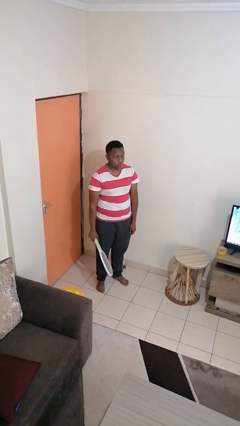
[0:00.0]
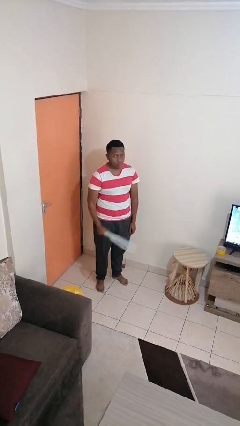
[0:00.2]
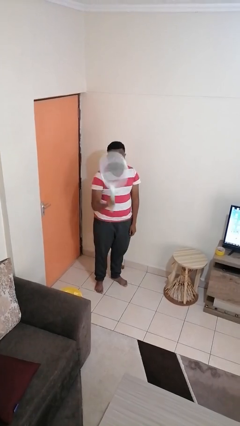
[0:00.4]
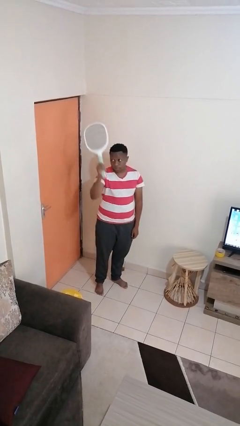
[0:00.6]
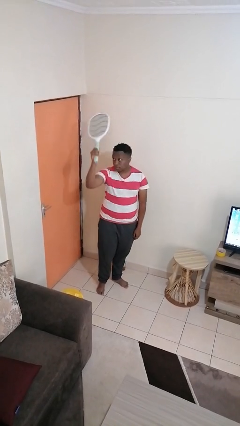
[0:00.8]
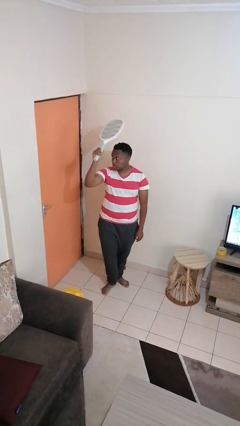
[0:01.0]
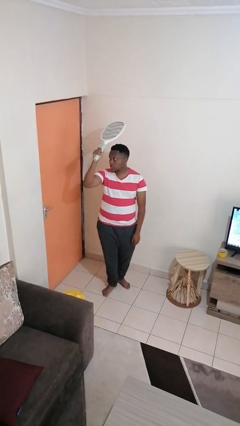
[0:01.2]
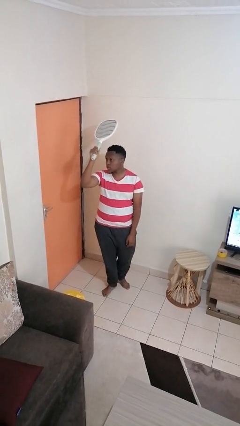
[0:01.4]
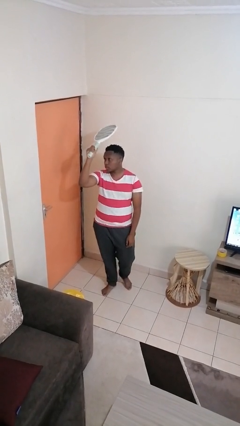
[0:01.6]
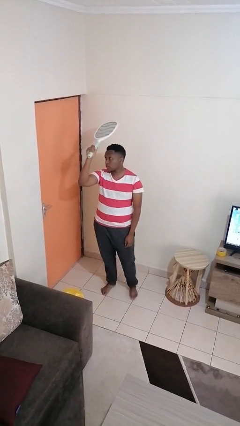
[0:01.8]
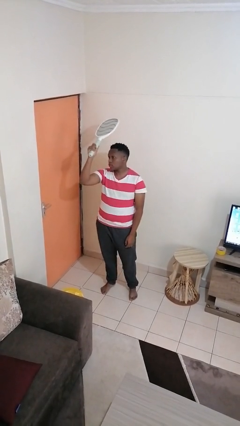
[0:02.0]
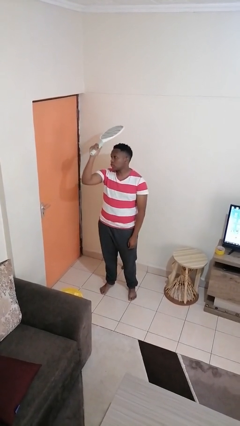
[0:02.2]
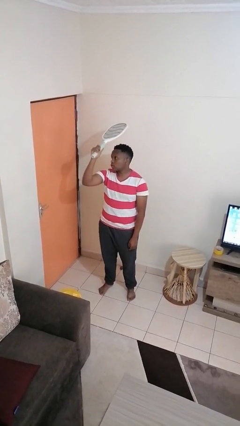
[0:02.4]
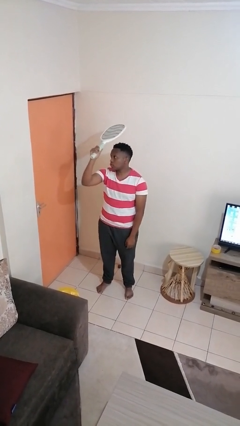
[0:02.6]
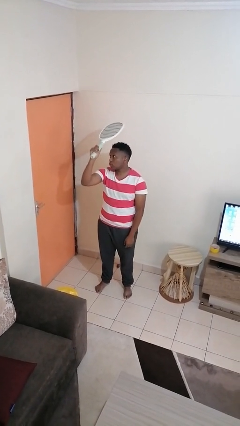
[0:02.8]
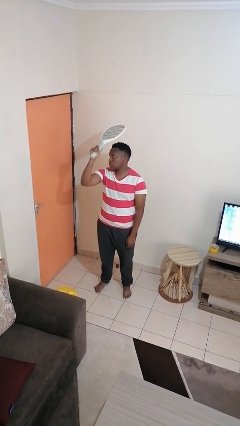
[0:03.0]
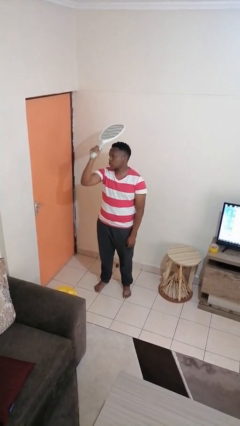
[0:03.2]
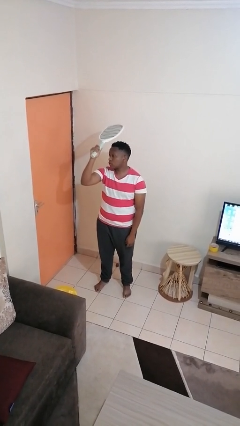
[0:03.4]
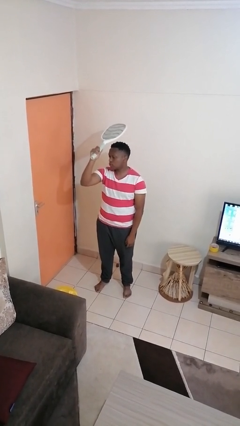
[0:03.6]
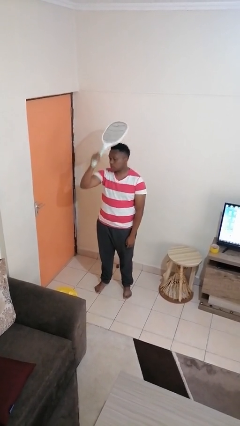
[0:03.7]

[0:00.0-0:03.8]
person holds object above head

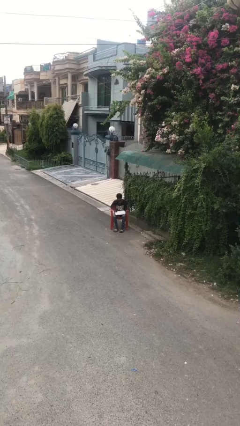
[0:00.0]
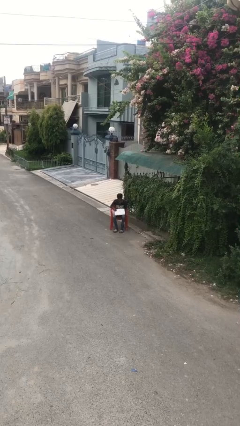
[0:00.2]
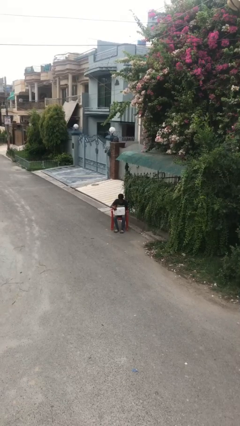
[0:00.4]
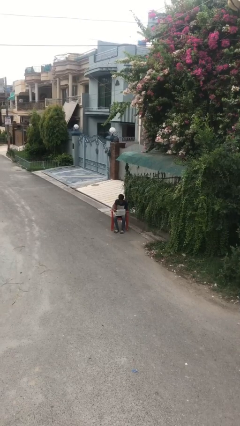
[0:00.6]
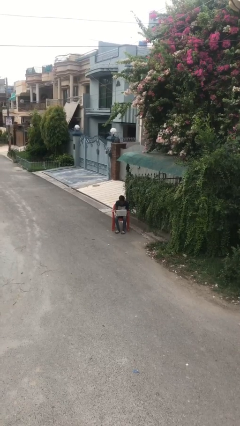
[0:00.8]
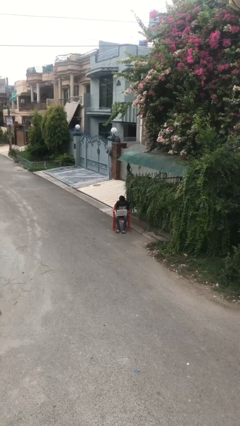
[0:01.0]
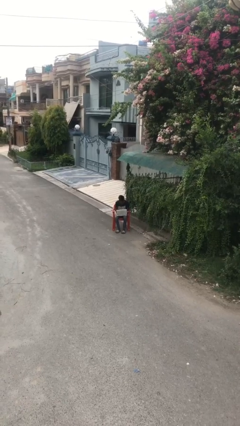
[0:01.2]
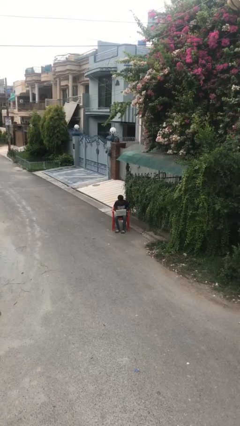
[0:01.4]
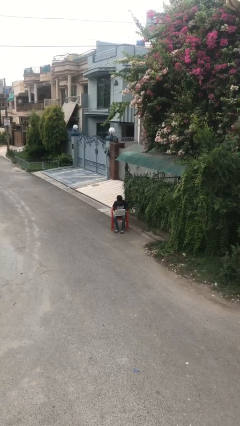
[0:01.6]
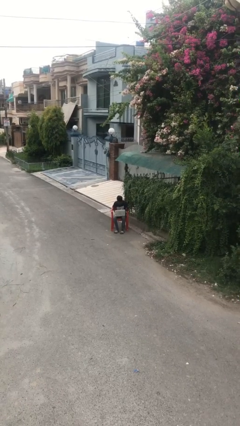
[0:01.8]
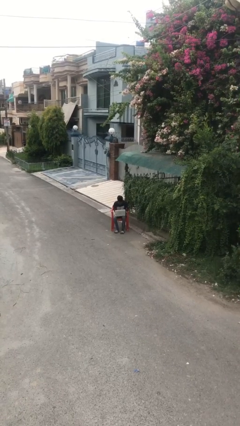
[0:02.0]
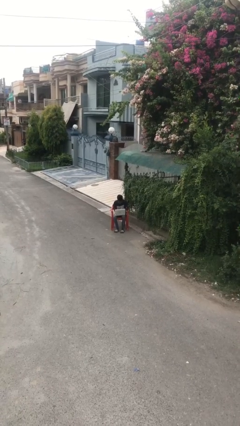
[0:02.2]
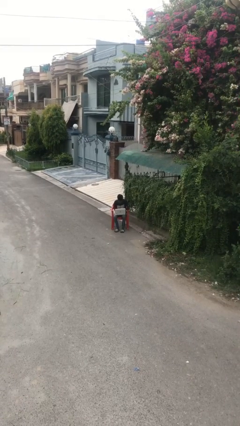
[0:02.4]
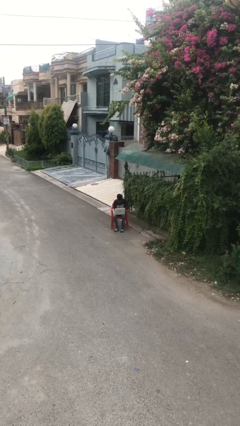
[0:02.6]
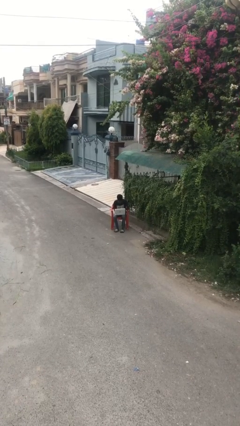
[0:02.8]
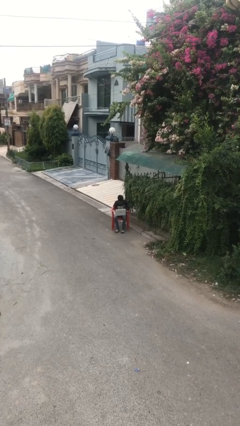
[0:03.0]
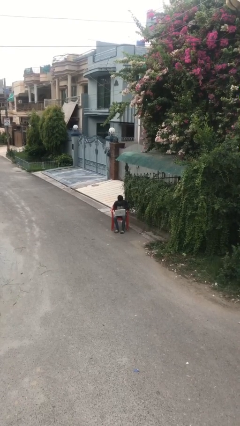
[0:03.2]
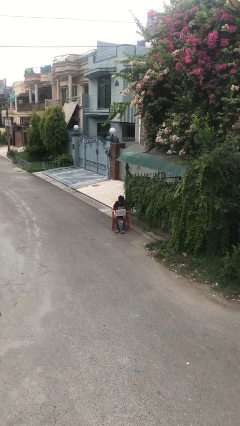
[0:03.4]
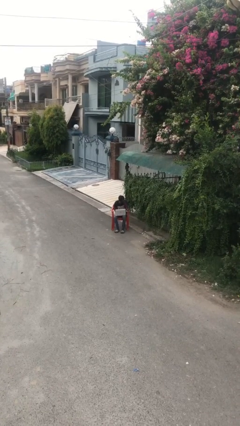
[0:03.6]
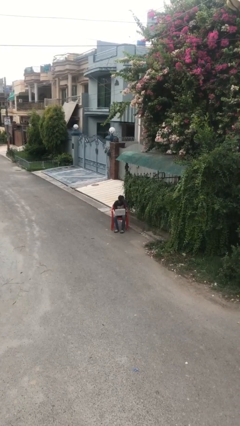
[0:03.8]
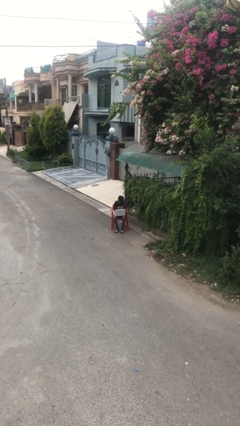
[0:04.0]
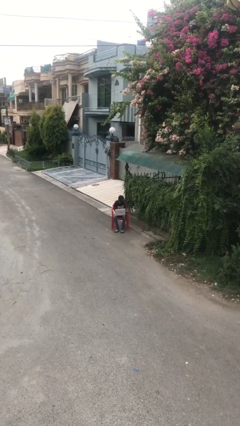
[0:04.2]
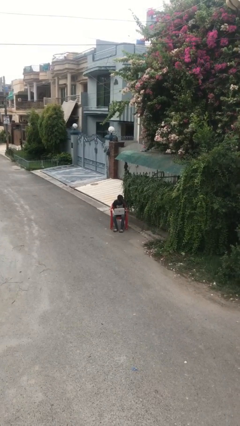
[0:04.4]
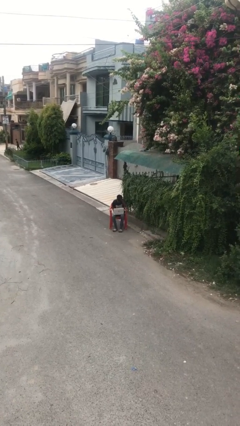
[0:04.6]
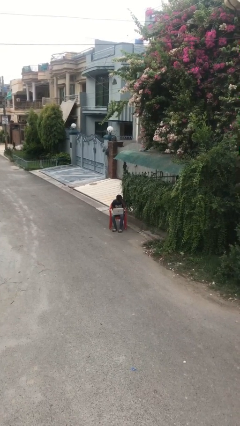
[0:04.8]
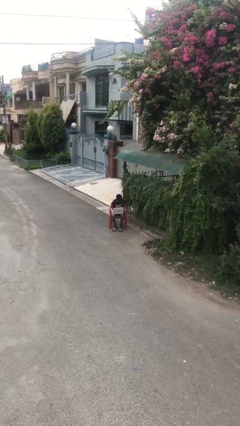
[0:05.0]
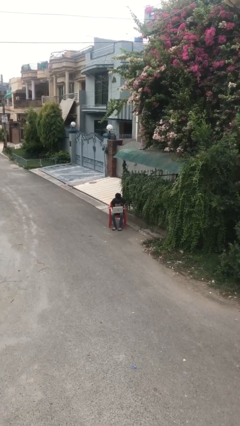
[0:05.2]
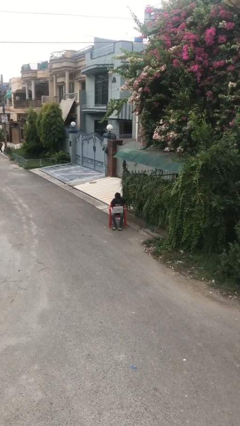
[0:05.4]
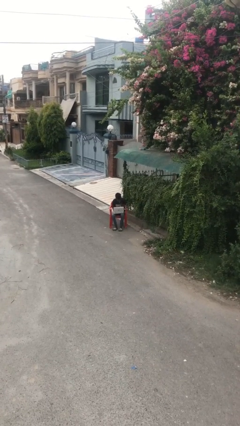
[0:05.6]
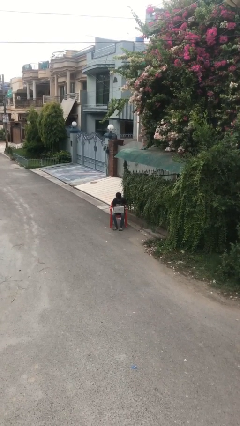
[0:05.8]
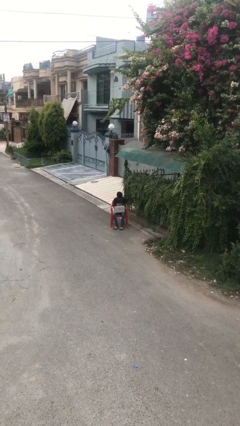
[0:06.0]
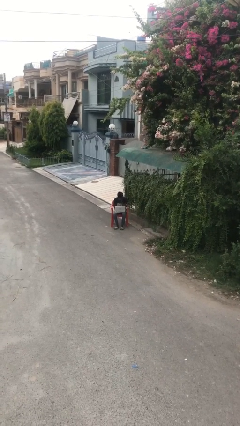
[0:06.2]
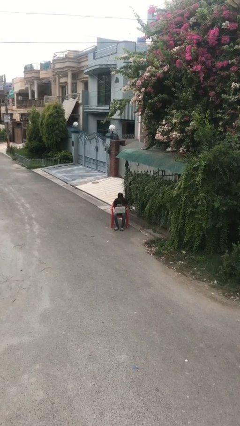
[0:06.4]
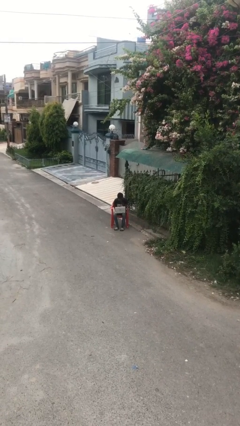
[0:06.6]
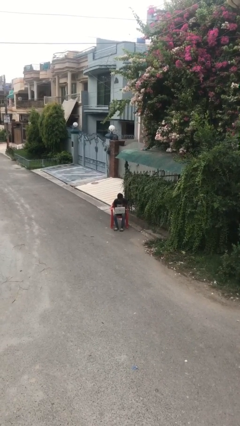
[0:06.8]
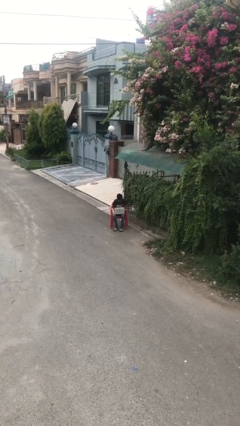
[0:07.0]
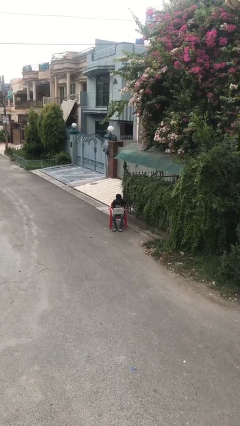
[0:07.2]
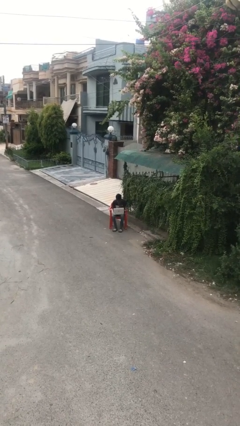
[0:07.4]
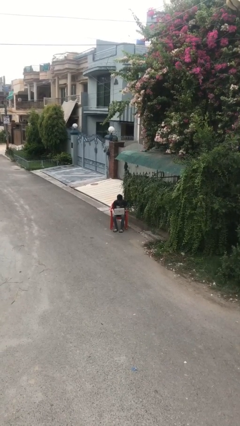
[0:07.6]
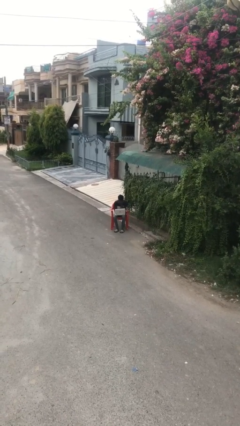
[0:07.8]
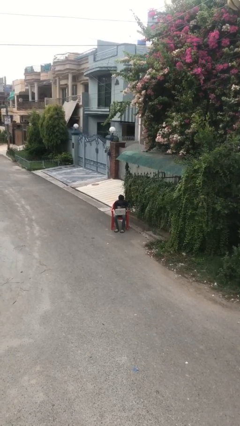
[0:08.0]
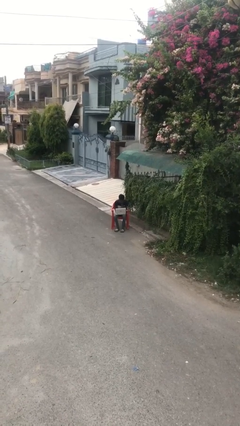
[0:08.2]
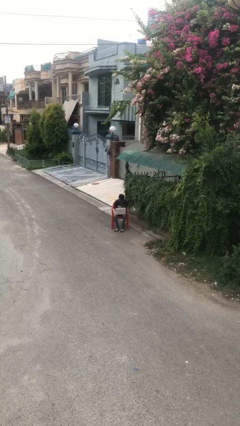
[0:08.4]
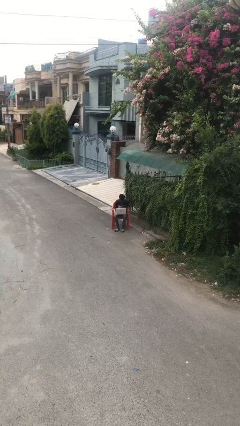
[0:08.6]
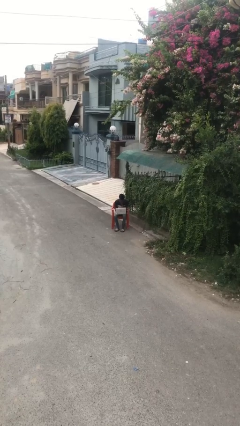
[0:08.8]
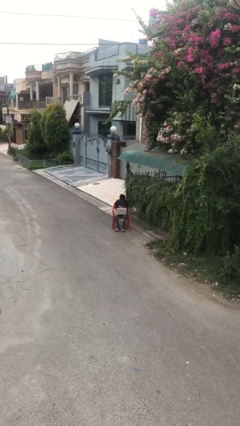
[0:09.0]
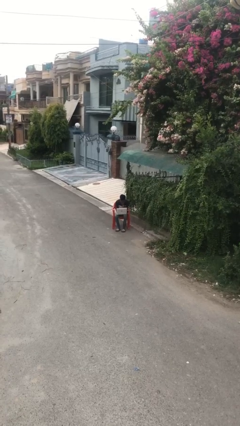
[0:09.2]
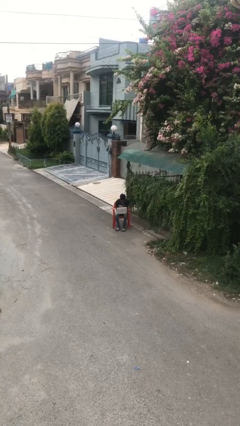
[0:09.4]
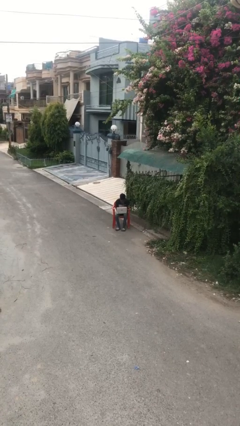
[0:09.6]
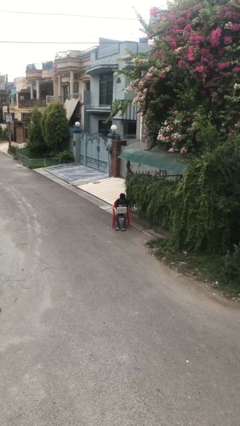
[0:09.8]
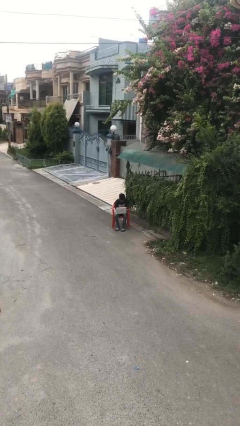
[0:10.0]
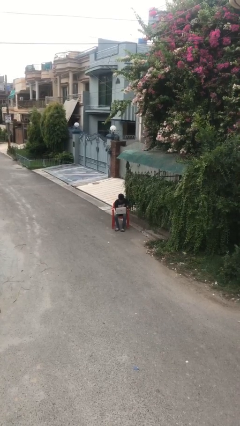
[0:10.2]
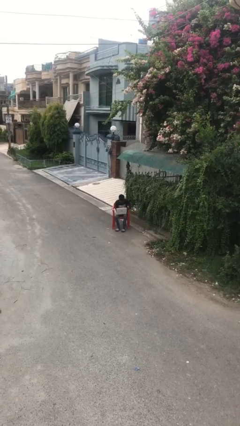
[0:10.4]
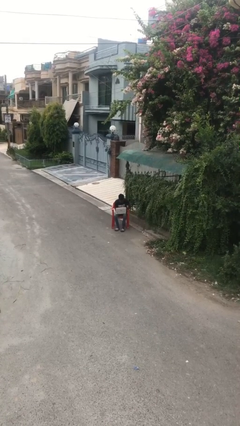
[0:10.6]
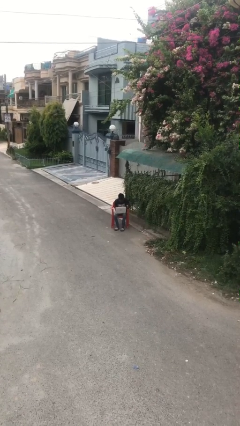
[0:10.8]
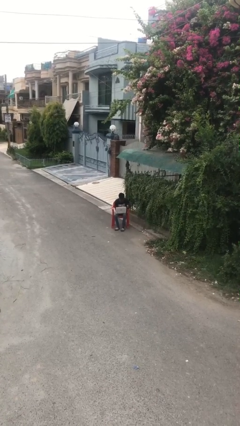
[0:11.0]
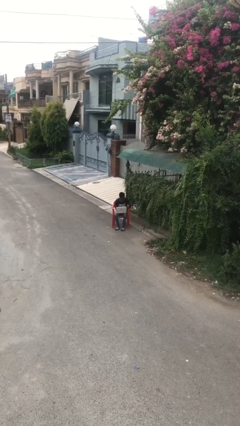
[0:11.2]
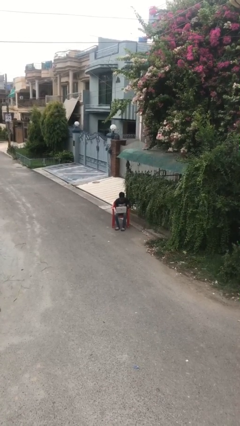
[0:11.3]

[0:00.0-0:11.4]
person interacts with laptop

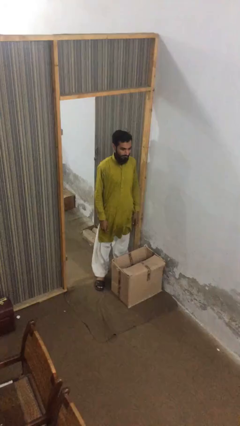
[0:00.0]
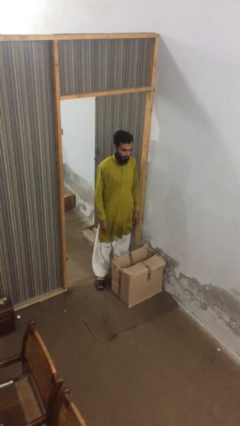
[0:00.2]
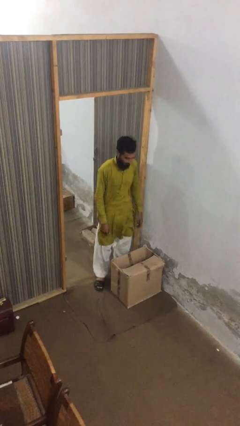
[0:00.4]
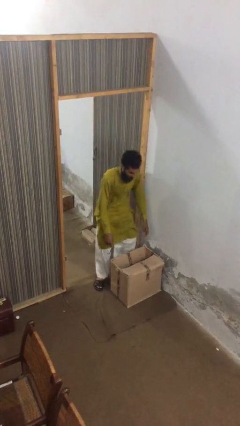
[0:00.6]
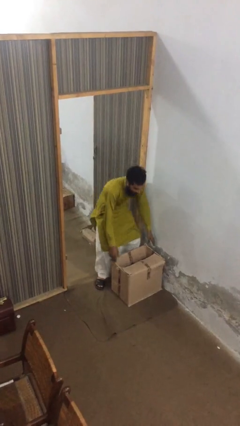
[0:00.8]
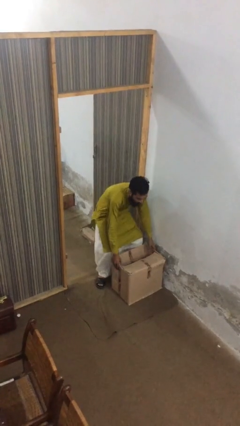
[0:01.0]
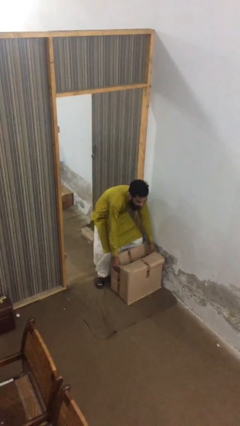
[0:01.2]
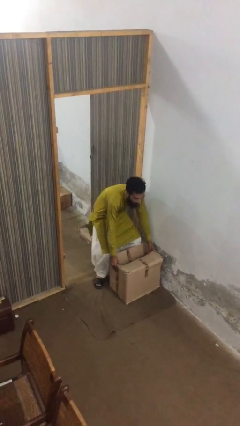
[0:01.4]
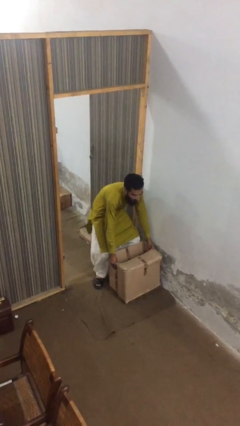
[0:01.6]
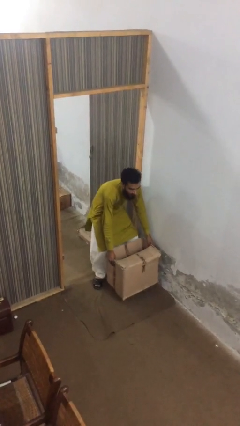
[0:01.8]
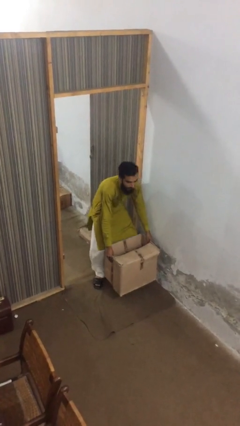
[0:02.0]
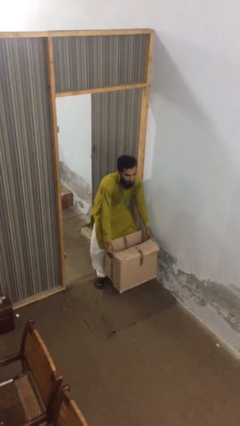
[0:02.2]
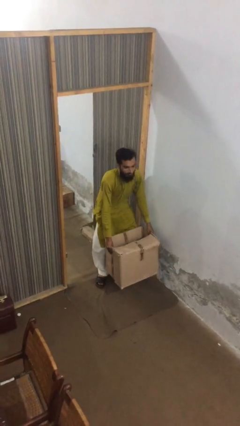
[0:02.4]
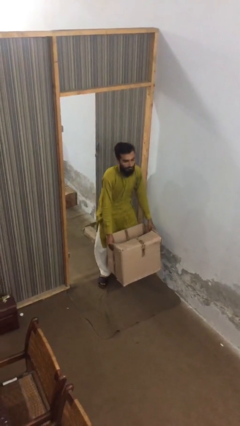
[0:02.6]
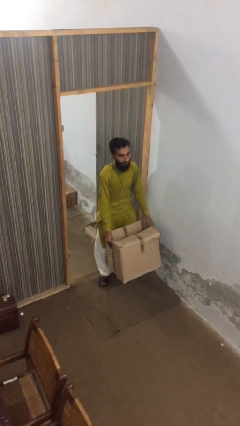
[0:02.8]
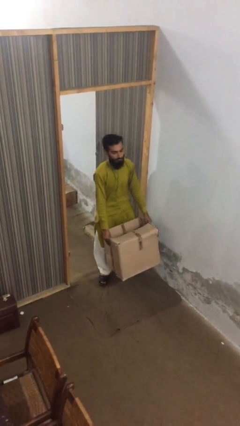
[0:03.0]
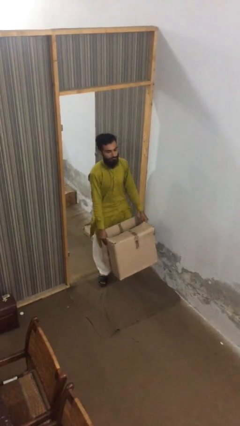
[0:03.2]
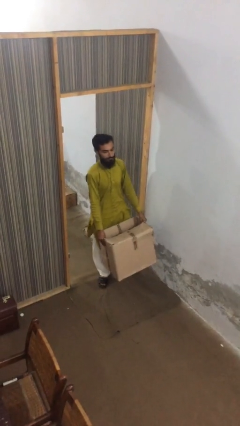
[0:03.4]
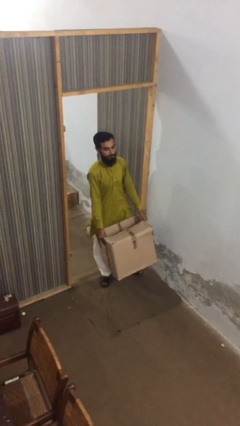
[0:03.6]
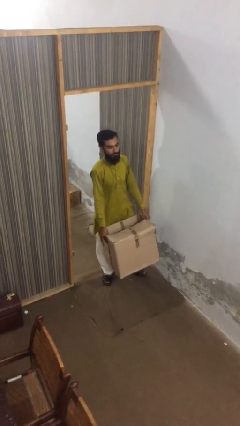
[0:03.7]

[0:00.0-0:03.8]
person picks up object from floor
